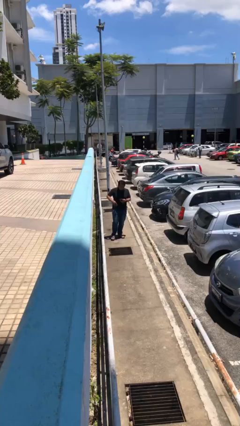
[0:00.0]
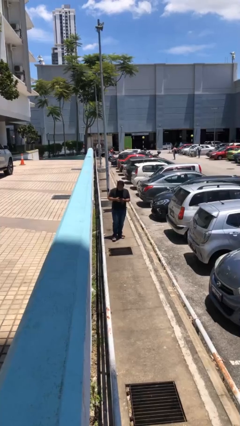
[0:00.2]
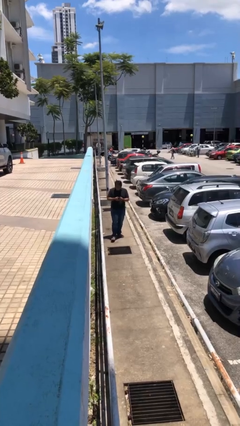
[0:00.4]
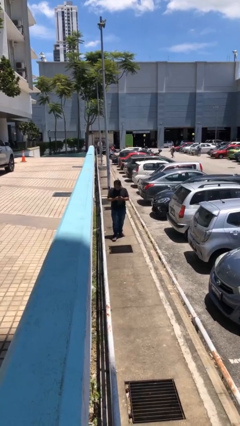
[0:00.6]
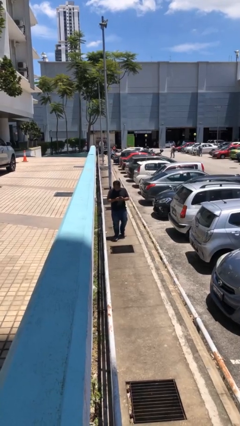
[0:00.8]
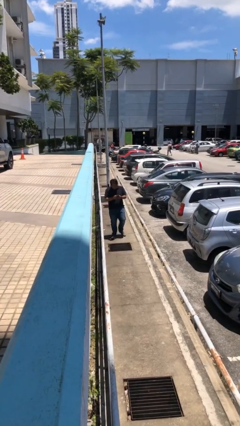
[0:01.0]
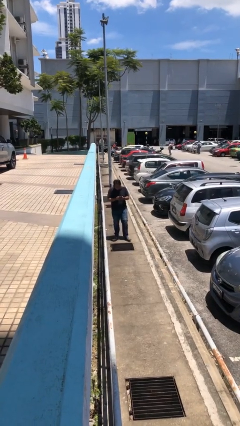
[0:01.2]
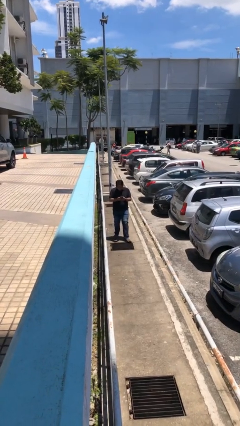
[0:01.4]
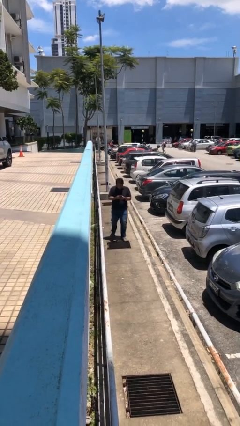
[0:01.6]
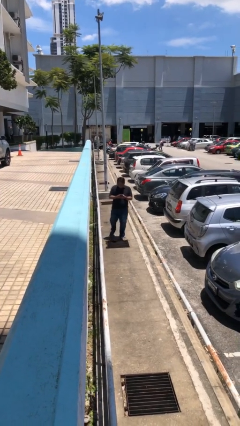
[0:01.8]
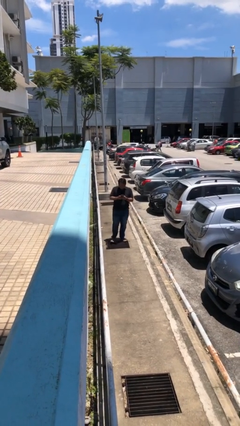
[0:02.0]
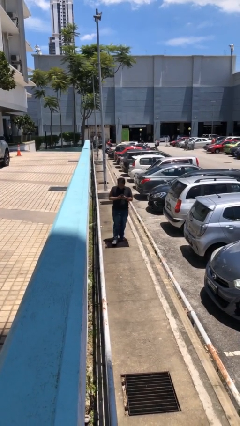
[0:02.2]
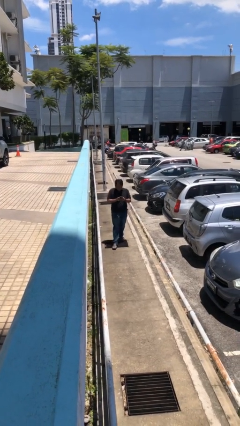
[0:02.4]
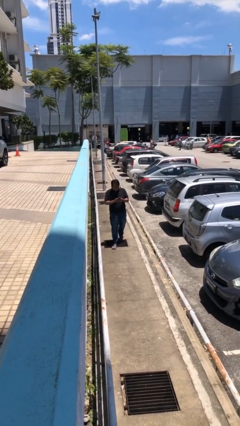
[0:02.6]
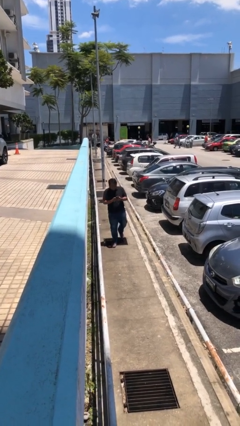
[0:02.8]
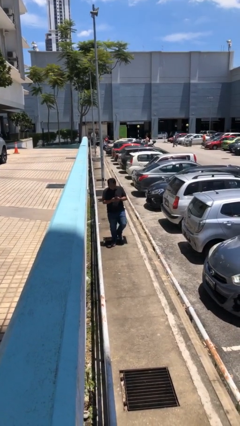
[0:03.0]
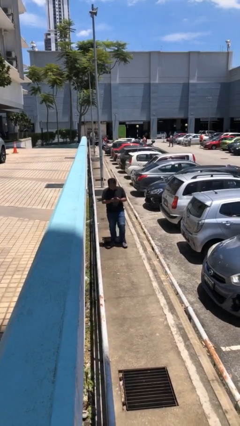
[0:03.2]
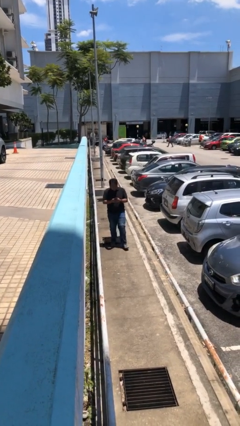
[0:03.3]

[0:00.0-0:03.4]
person texts on phone

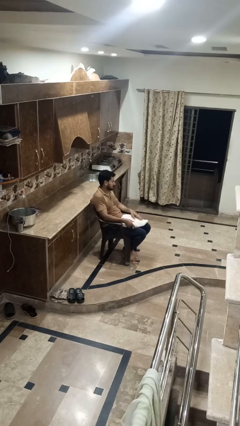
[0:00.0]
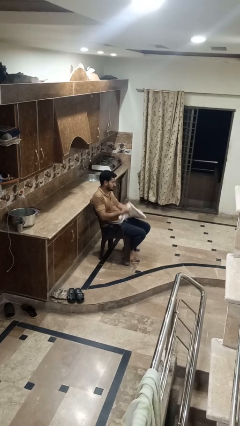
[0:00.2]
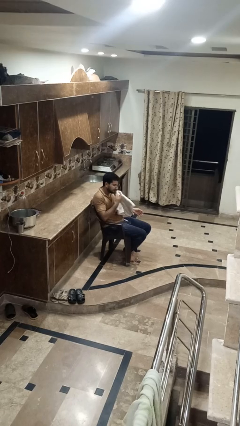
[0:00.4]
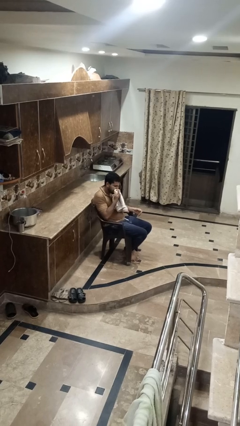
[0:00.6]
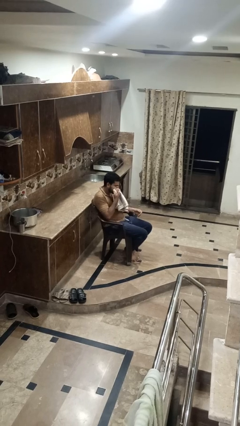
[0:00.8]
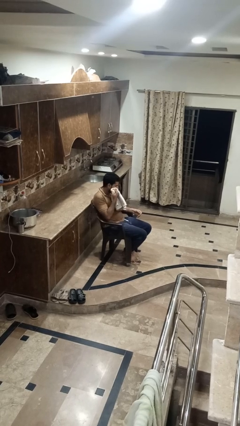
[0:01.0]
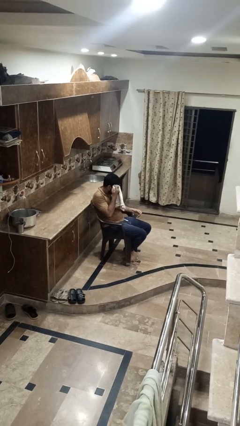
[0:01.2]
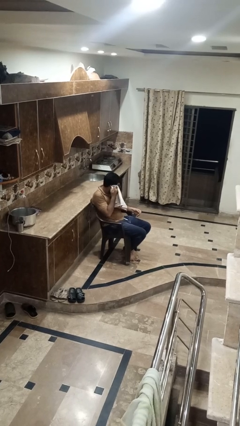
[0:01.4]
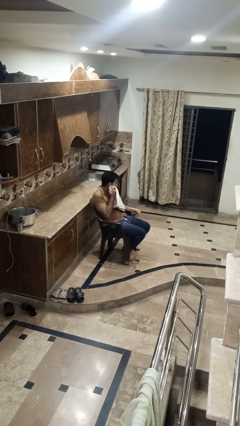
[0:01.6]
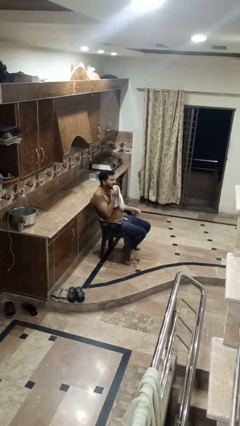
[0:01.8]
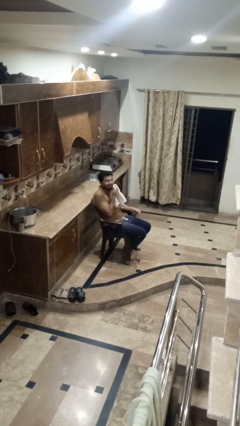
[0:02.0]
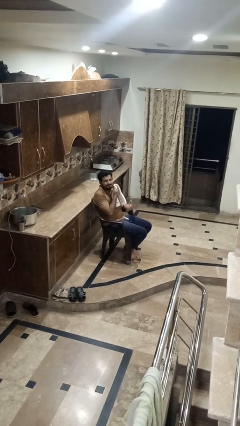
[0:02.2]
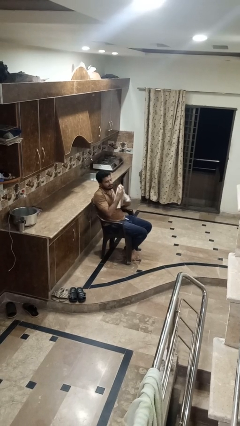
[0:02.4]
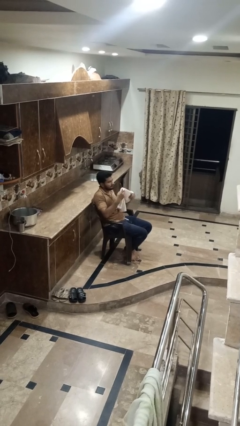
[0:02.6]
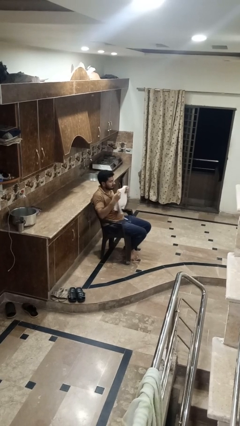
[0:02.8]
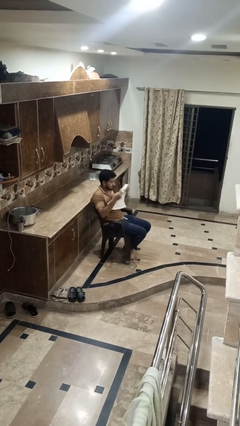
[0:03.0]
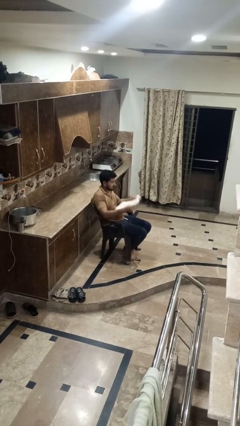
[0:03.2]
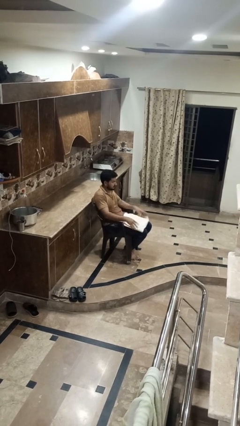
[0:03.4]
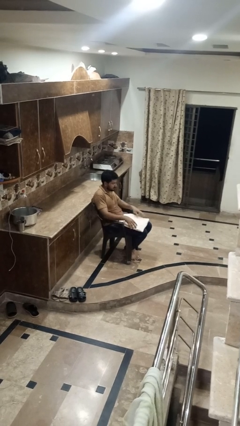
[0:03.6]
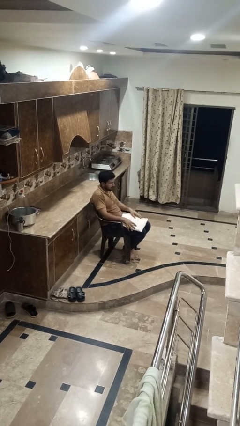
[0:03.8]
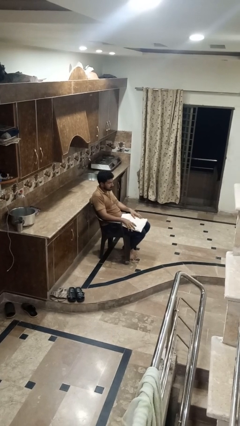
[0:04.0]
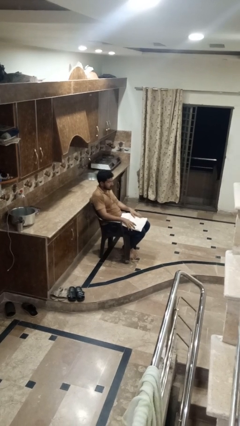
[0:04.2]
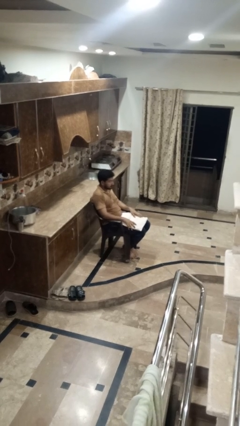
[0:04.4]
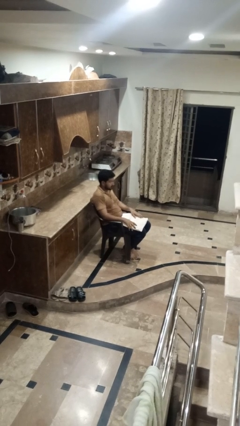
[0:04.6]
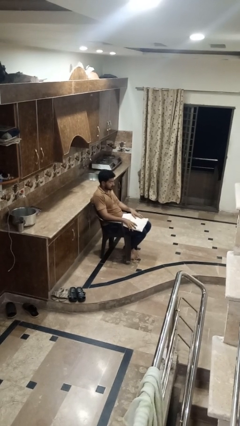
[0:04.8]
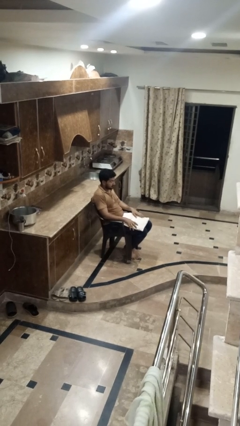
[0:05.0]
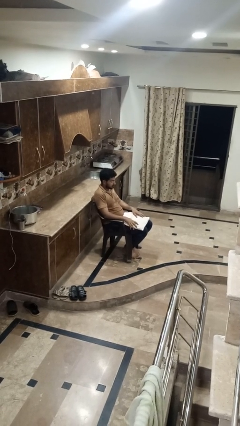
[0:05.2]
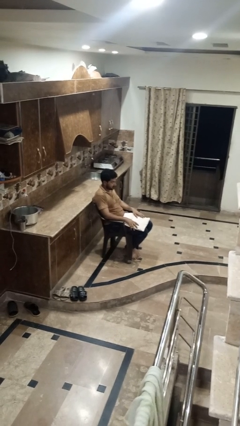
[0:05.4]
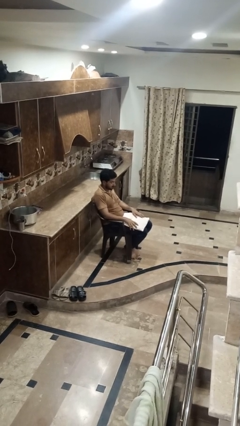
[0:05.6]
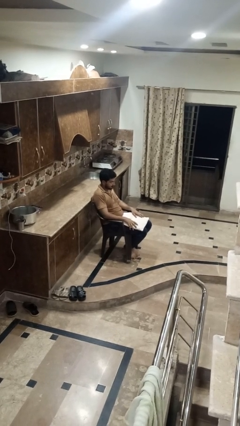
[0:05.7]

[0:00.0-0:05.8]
person wipes mouth with napkin

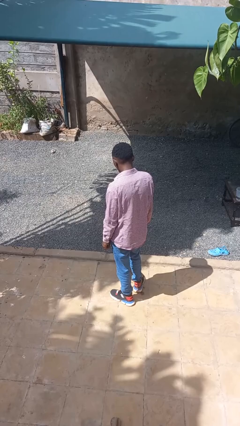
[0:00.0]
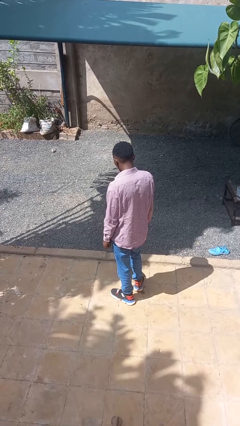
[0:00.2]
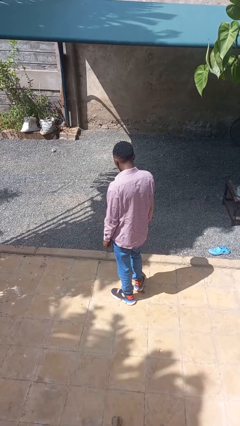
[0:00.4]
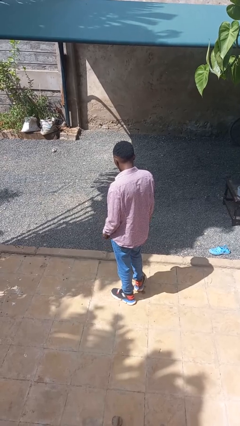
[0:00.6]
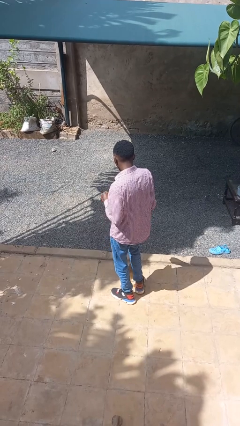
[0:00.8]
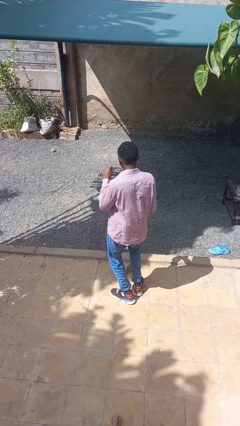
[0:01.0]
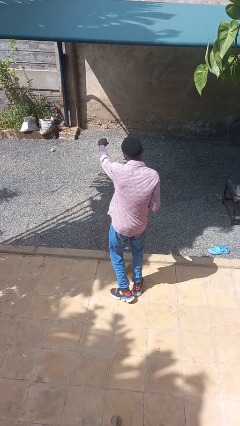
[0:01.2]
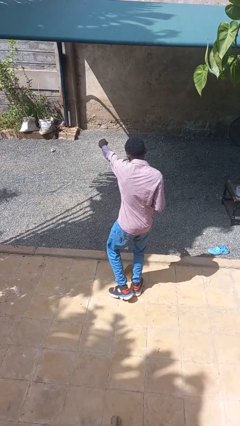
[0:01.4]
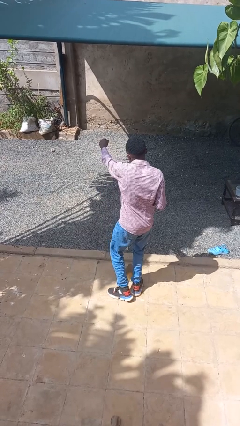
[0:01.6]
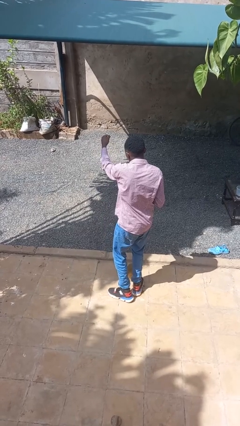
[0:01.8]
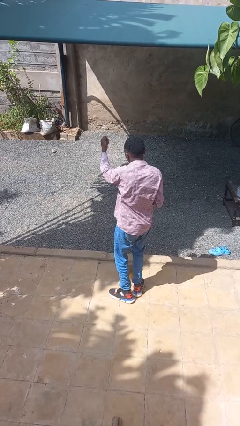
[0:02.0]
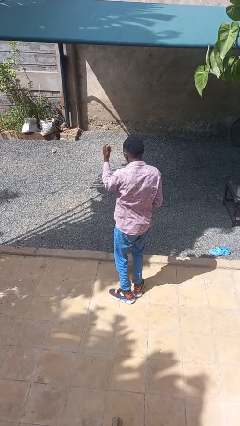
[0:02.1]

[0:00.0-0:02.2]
person punches

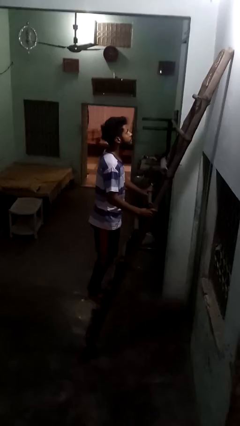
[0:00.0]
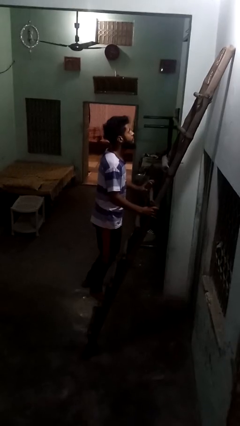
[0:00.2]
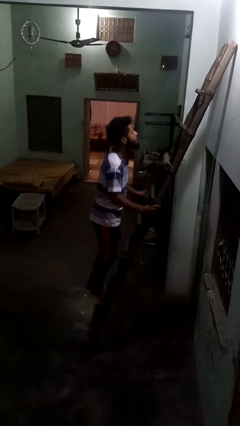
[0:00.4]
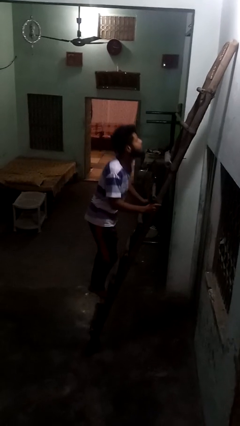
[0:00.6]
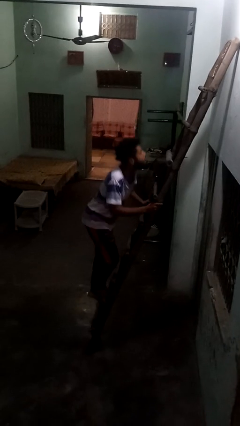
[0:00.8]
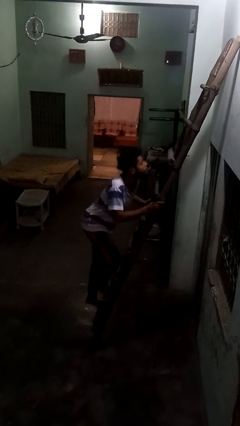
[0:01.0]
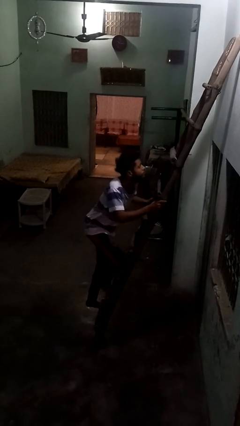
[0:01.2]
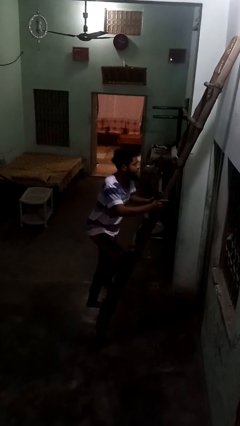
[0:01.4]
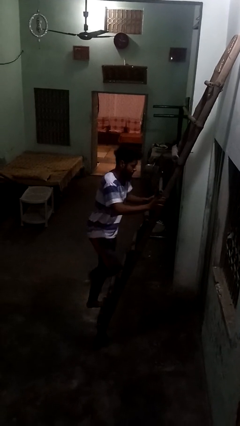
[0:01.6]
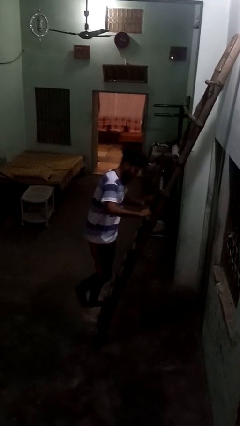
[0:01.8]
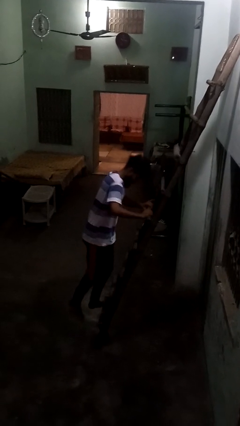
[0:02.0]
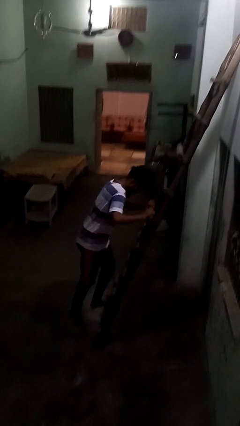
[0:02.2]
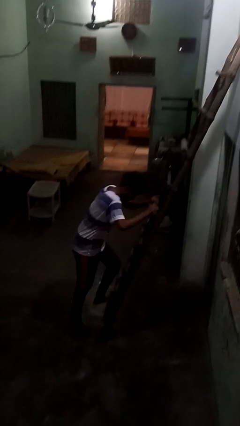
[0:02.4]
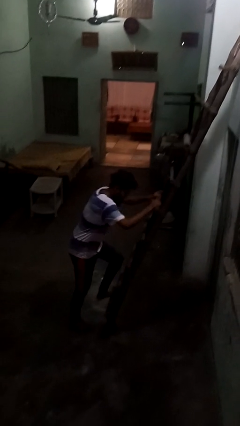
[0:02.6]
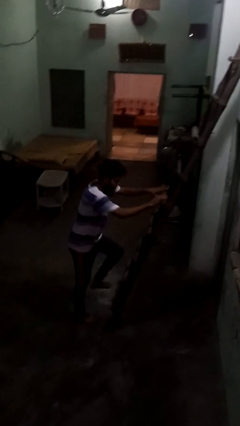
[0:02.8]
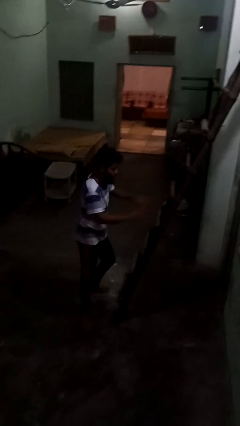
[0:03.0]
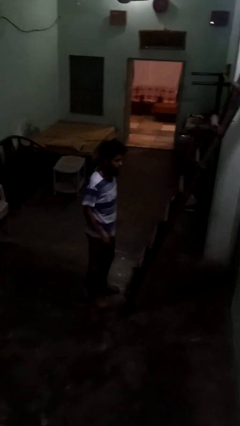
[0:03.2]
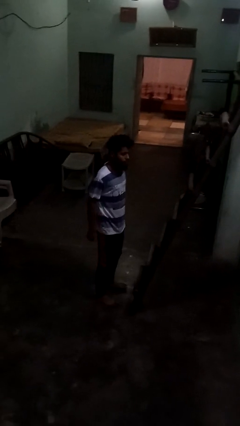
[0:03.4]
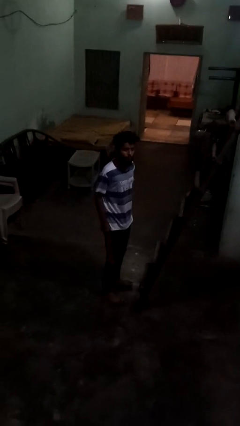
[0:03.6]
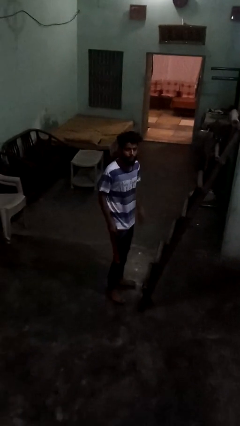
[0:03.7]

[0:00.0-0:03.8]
person climbs down ladder

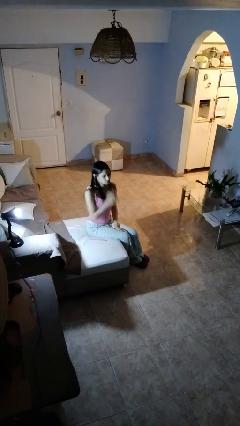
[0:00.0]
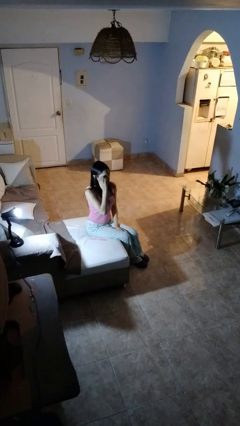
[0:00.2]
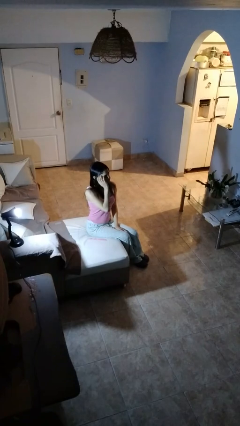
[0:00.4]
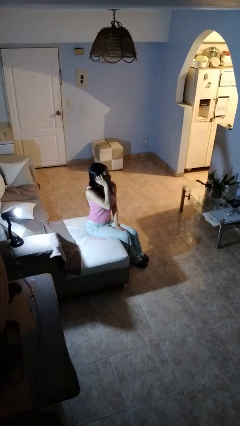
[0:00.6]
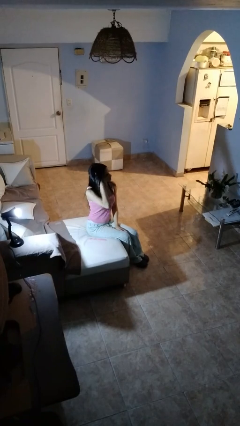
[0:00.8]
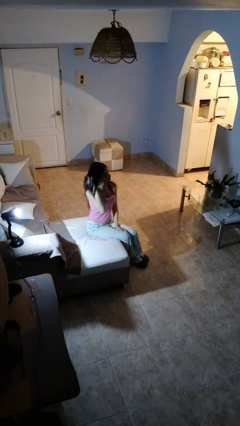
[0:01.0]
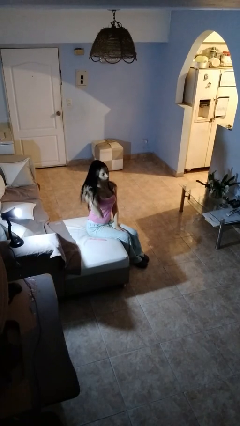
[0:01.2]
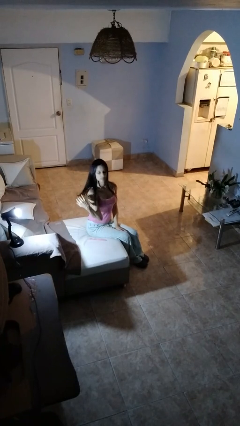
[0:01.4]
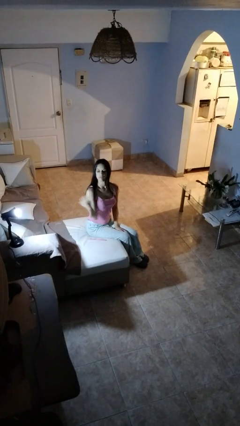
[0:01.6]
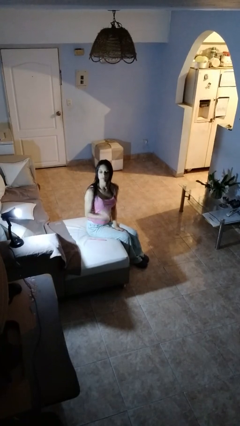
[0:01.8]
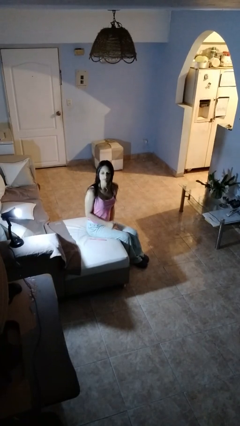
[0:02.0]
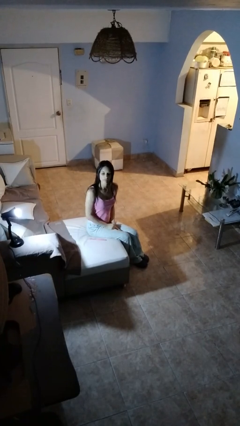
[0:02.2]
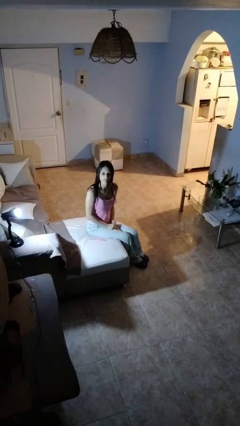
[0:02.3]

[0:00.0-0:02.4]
person strokes hair
